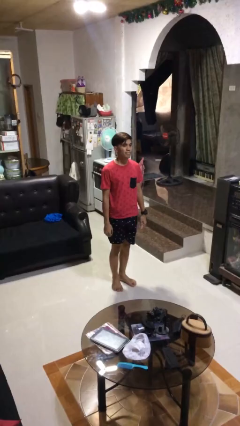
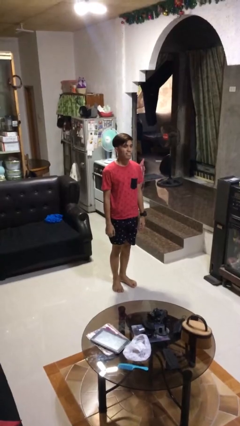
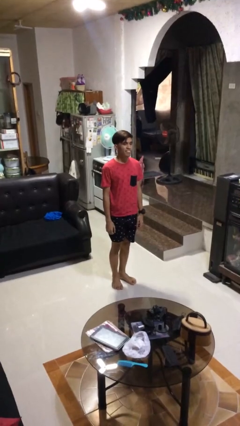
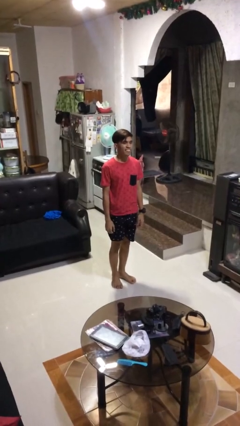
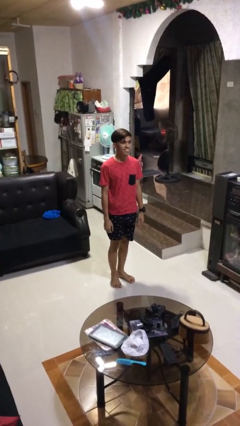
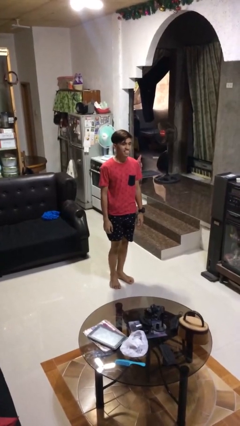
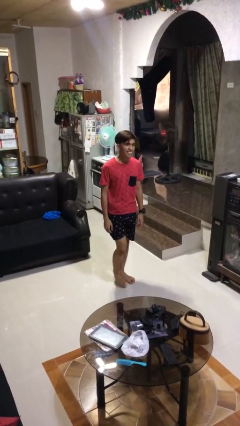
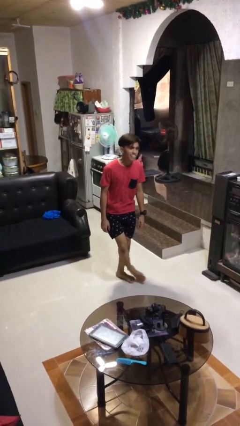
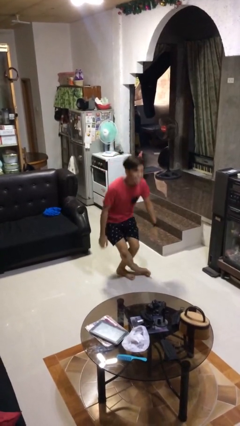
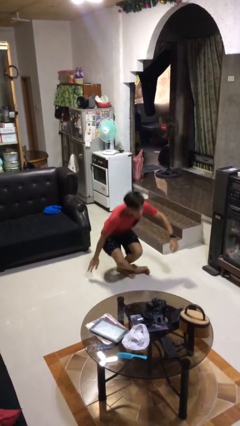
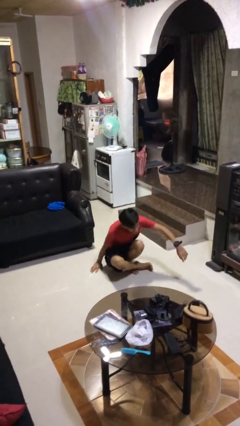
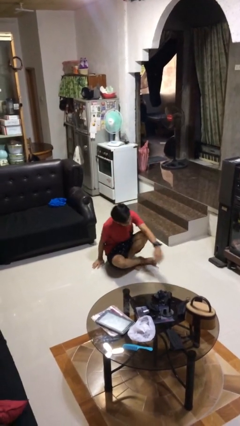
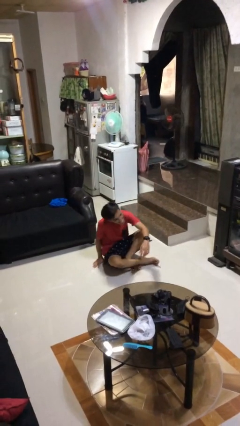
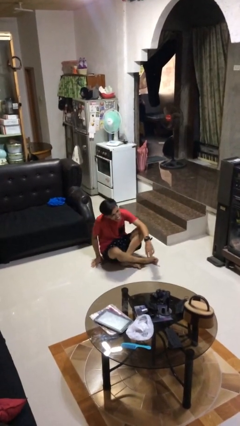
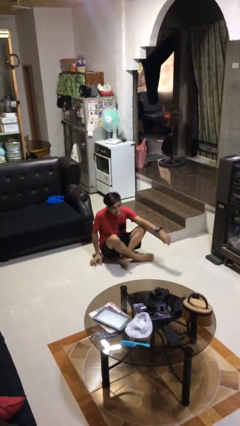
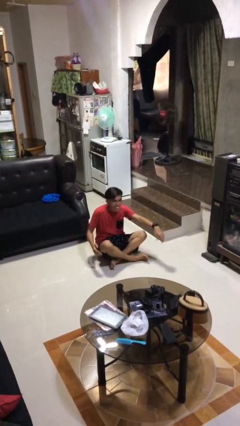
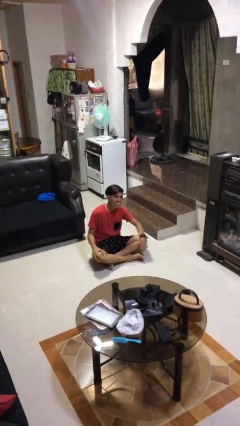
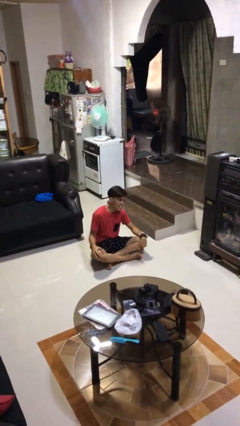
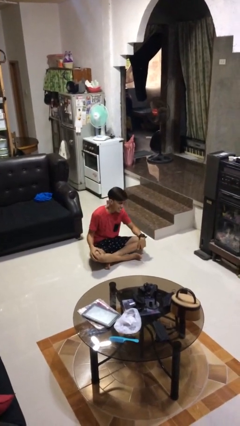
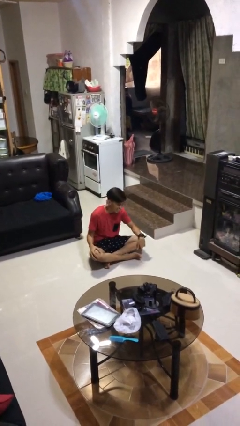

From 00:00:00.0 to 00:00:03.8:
person sits crisscross

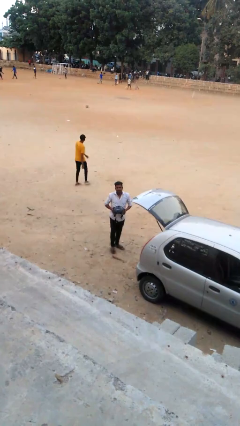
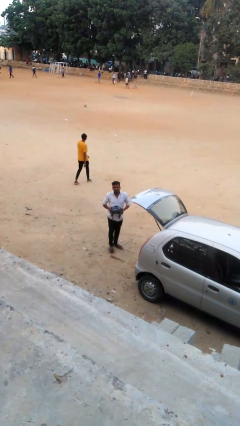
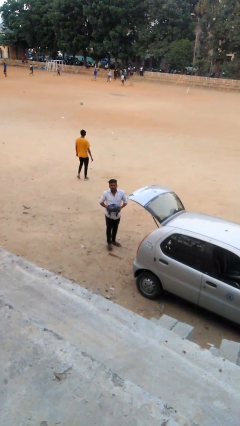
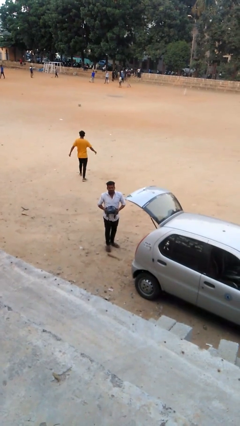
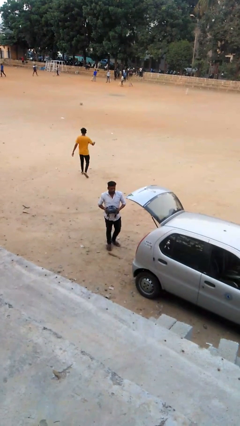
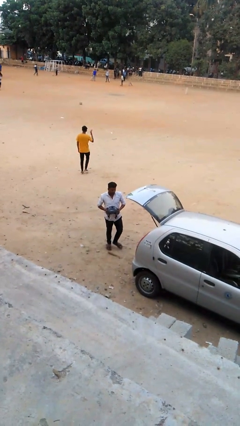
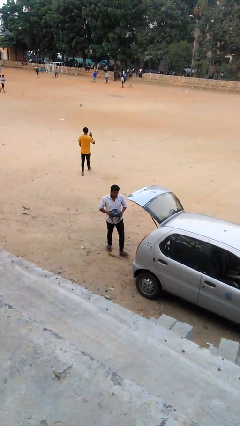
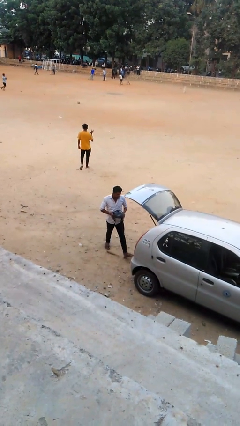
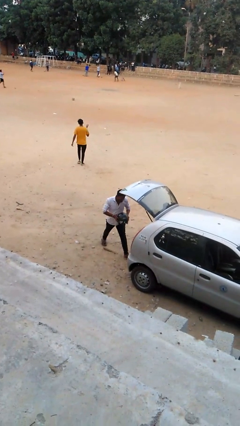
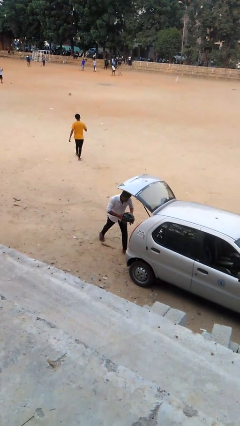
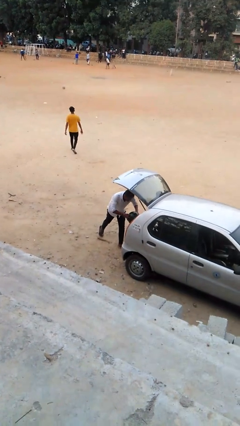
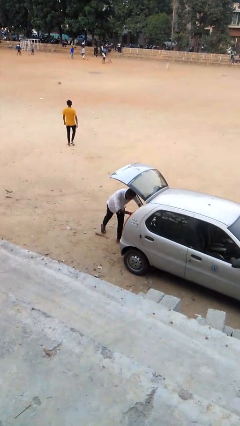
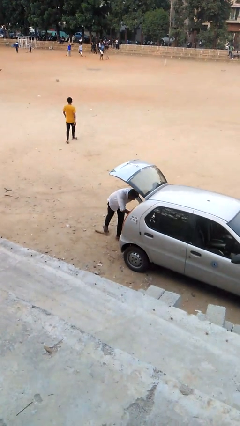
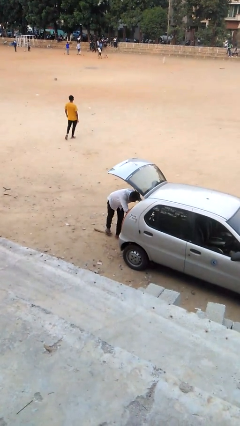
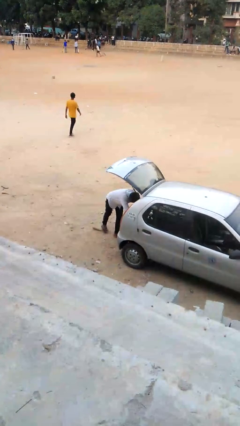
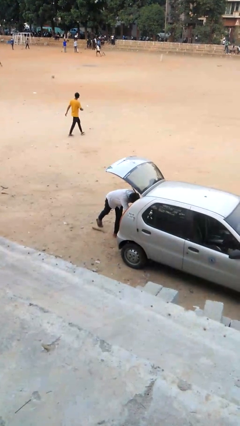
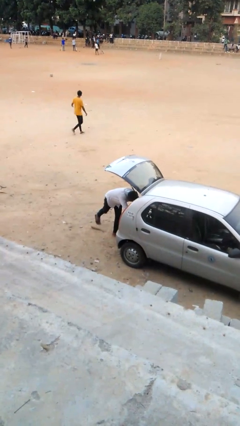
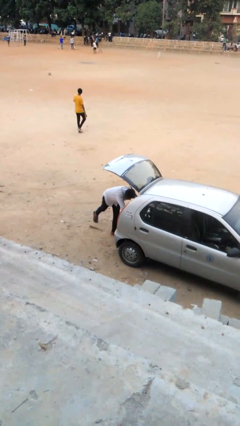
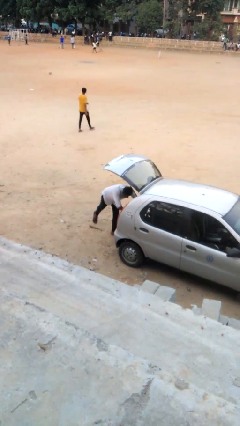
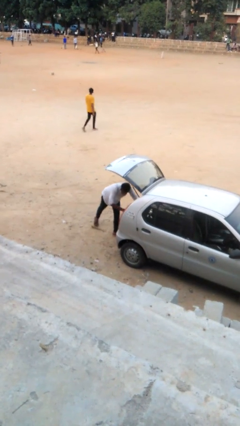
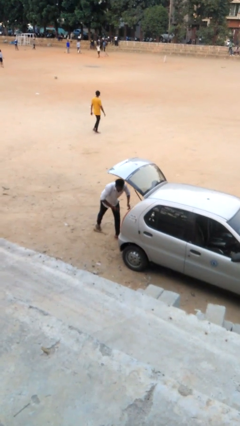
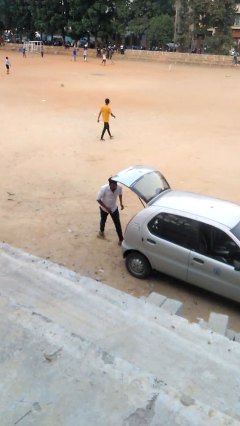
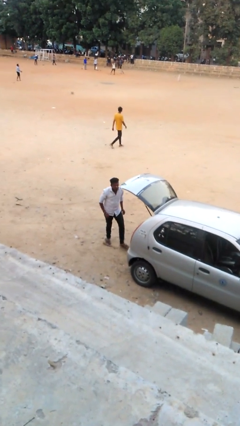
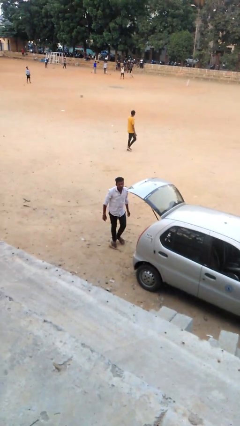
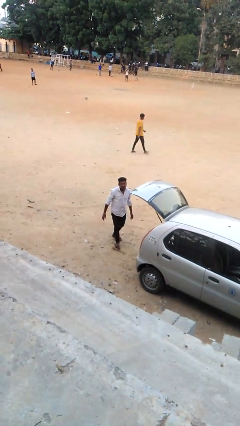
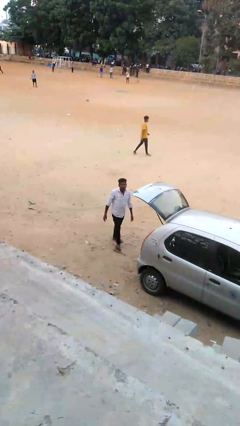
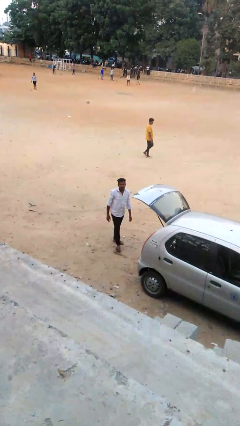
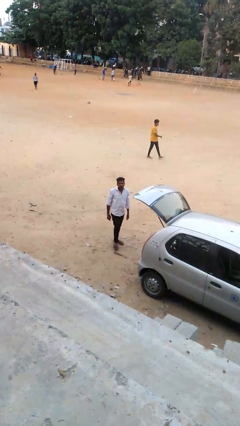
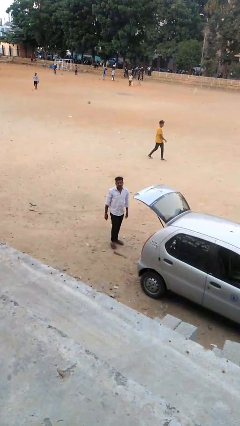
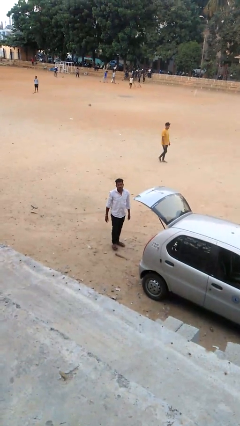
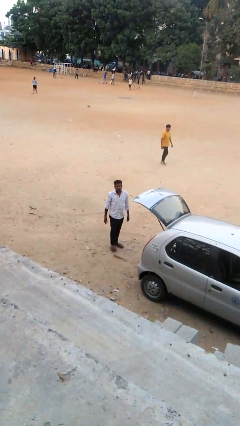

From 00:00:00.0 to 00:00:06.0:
person loads car

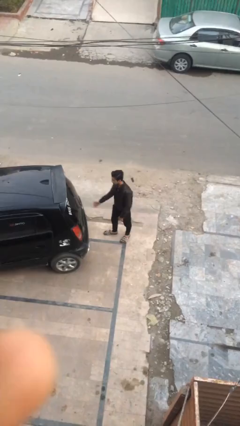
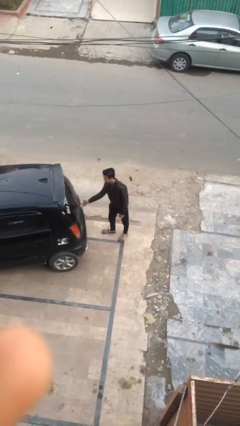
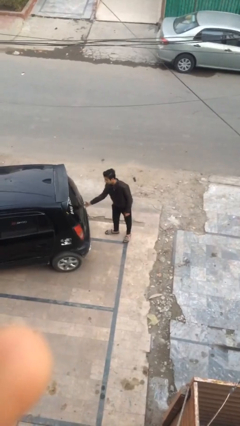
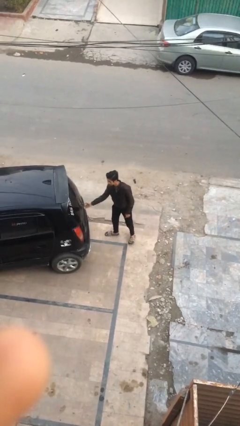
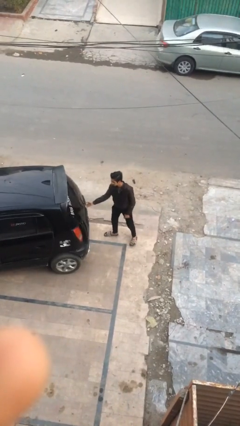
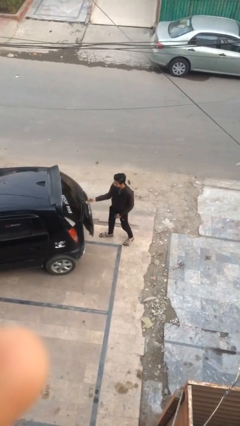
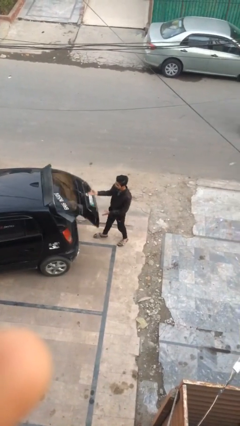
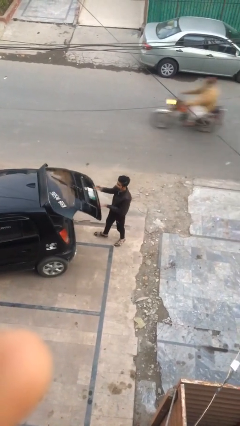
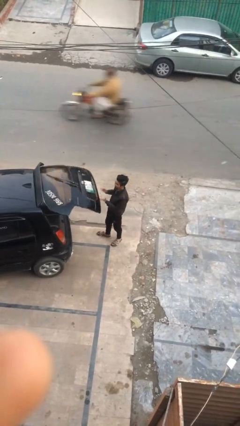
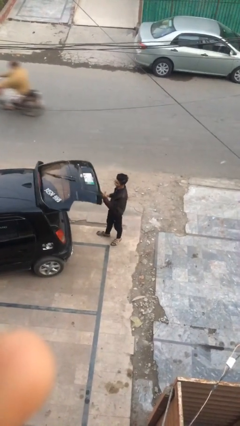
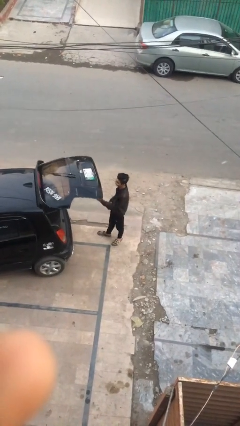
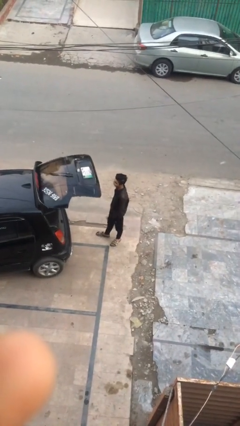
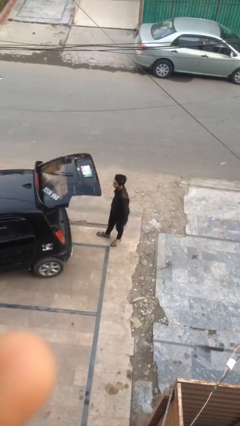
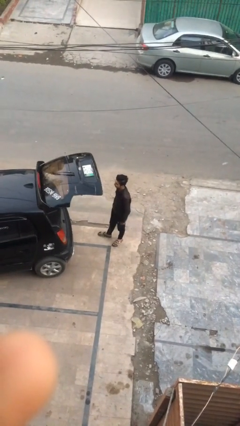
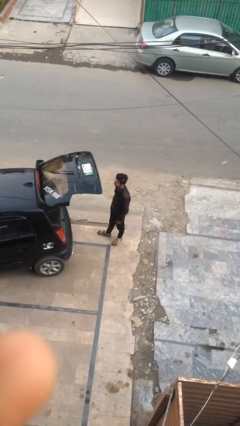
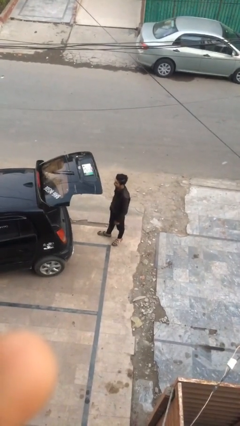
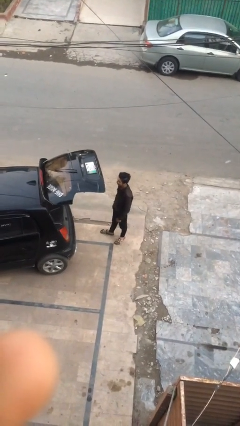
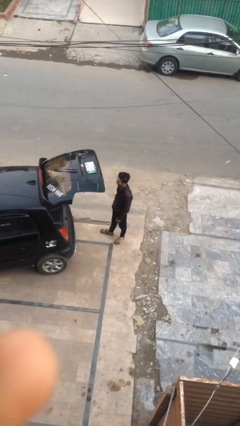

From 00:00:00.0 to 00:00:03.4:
person opens car trunk

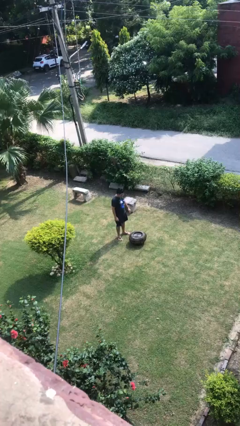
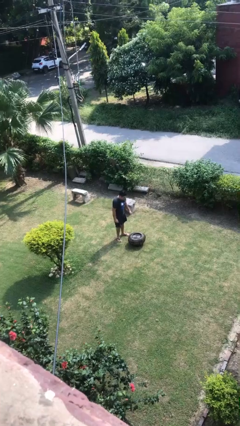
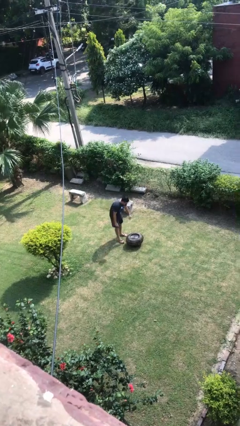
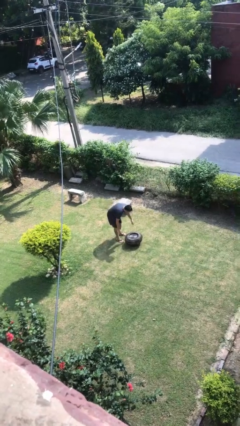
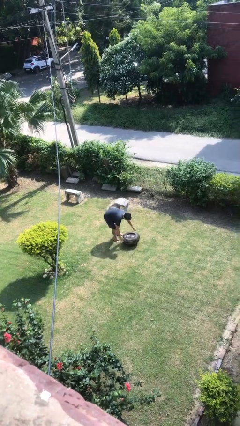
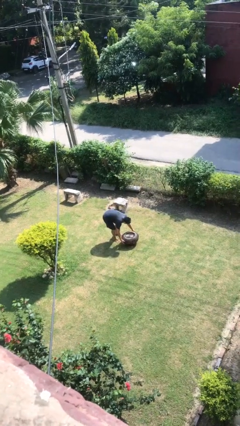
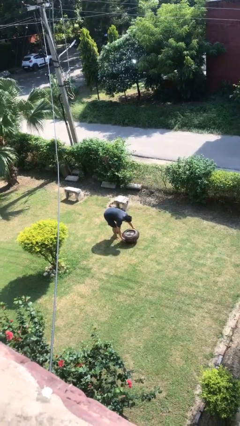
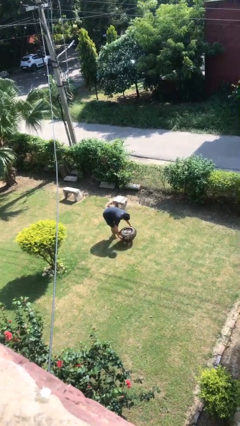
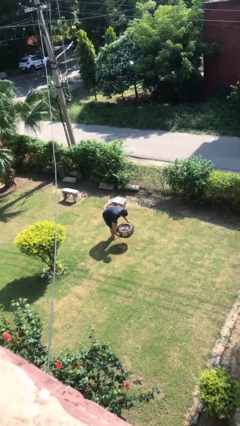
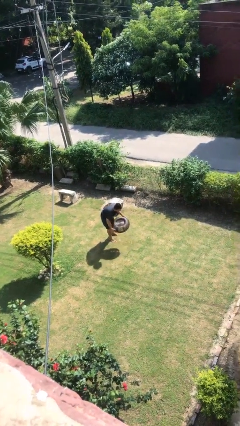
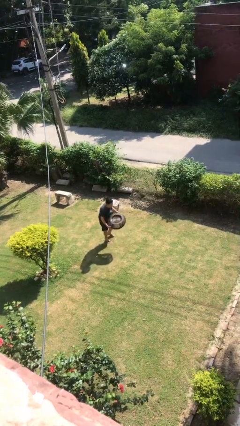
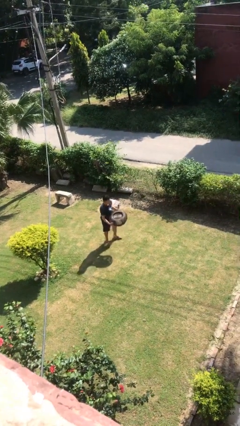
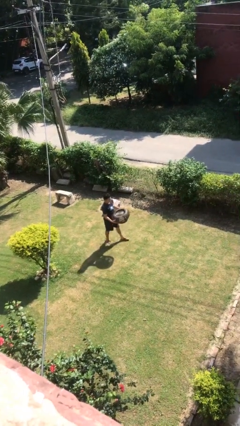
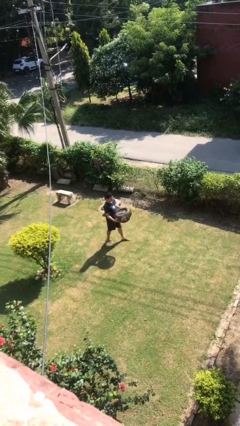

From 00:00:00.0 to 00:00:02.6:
person picks up object from floor

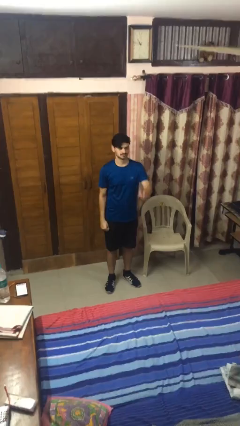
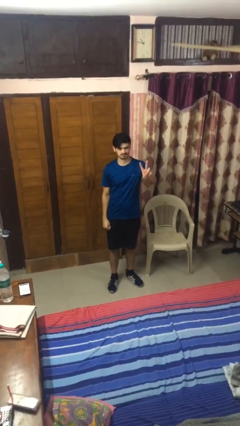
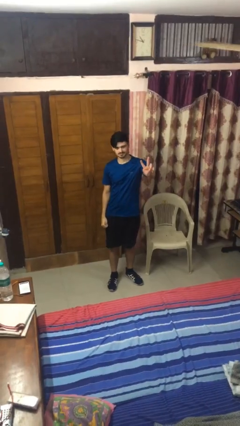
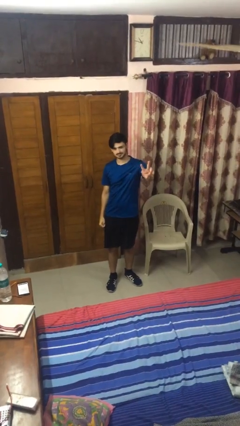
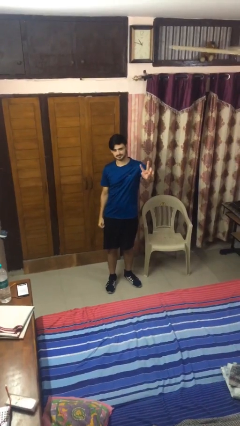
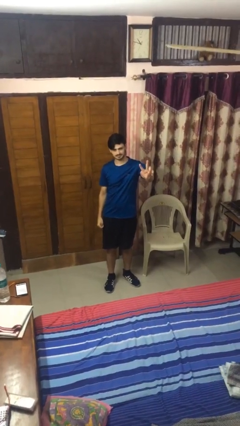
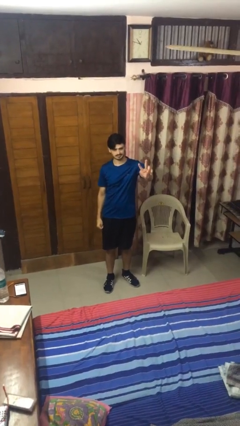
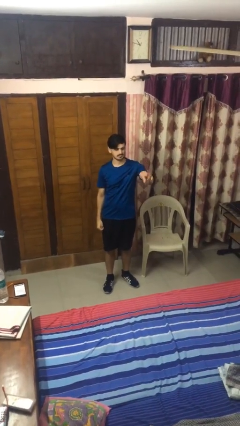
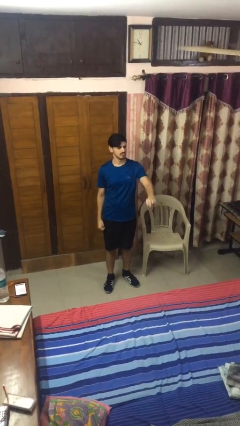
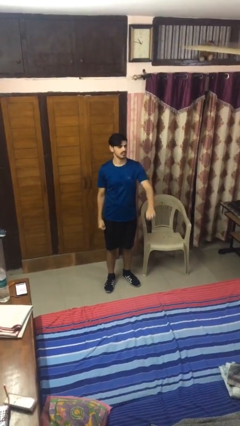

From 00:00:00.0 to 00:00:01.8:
person gestures peace
